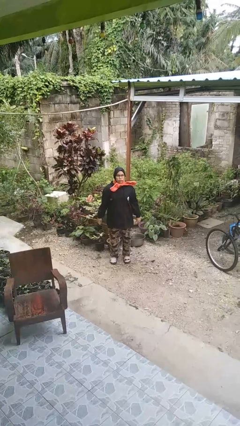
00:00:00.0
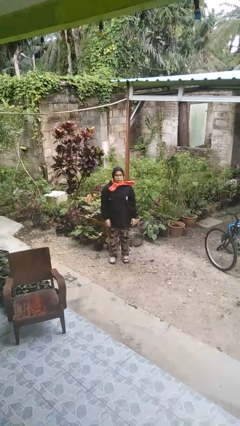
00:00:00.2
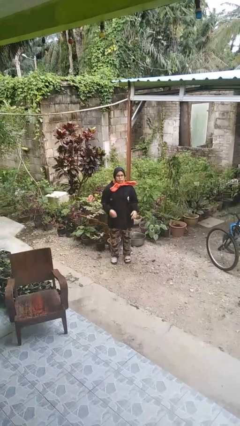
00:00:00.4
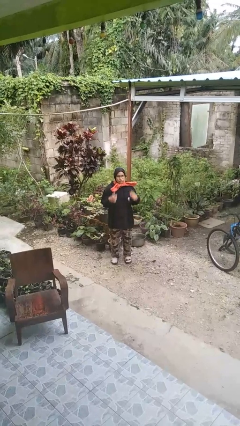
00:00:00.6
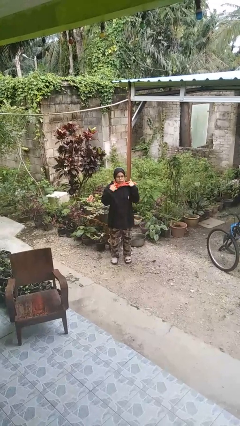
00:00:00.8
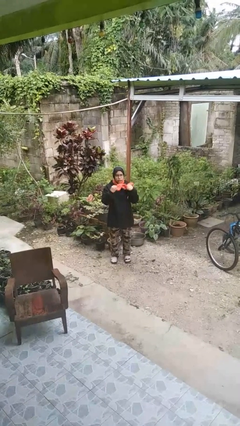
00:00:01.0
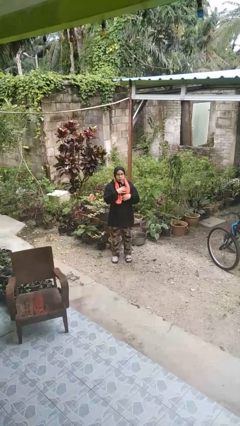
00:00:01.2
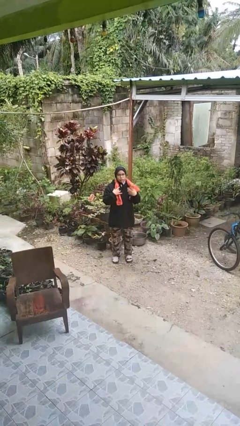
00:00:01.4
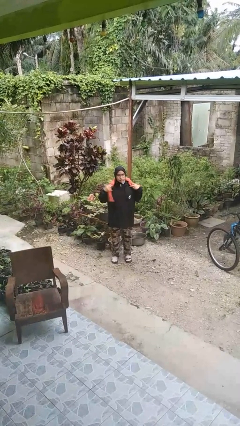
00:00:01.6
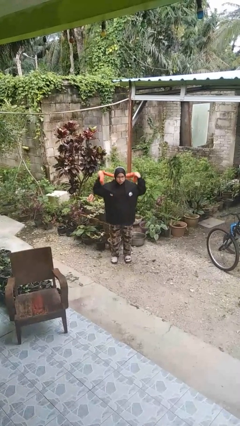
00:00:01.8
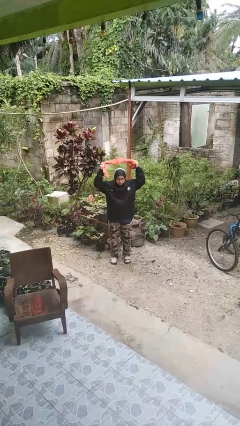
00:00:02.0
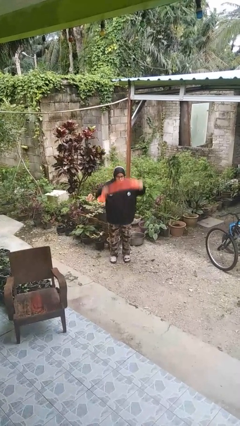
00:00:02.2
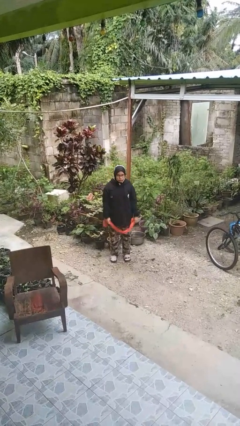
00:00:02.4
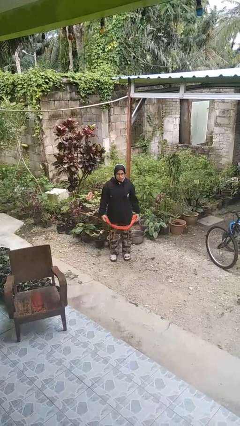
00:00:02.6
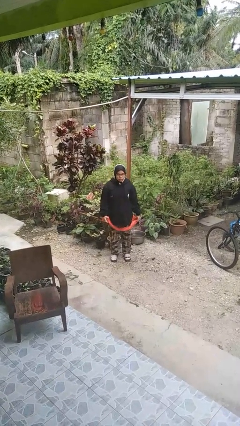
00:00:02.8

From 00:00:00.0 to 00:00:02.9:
person takes off scarf

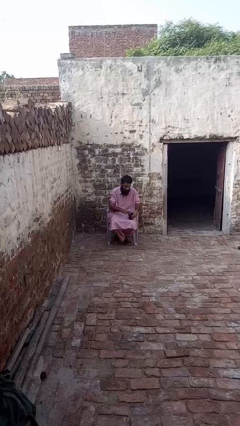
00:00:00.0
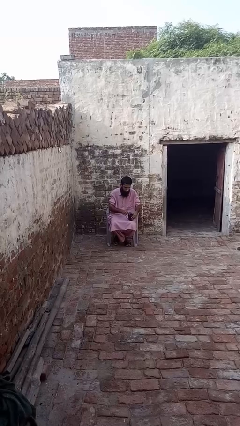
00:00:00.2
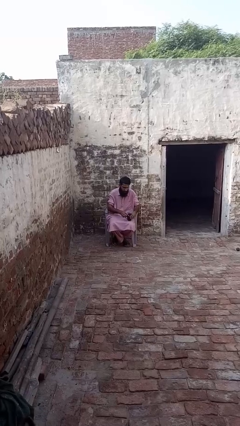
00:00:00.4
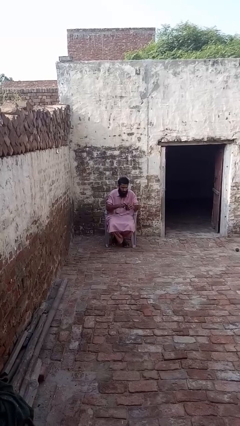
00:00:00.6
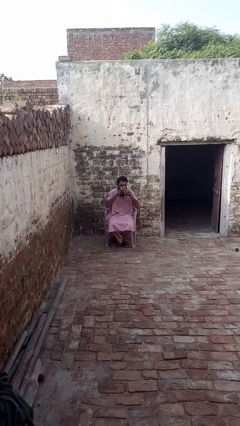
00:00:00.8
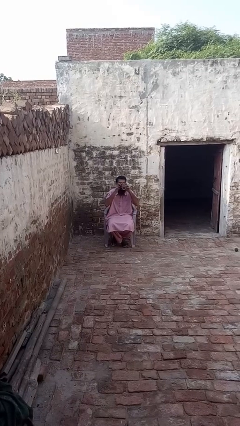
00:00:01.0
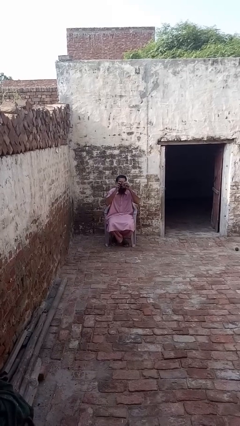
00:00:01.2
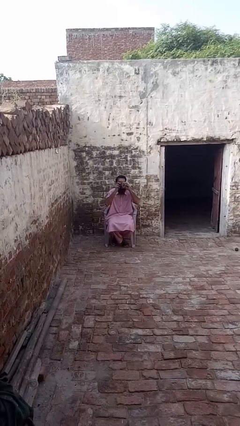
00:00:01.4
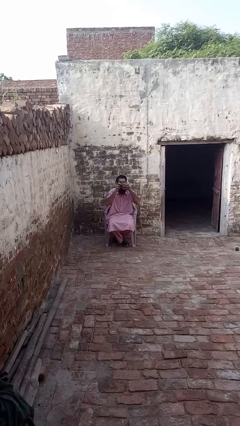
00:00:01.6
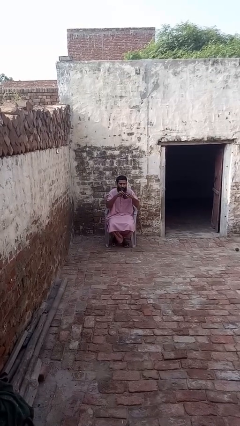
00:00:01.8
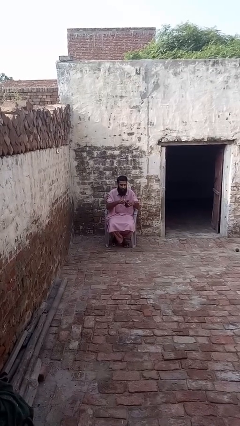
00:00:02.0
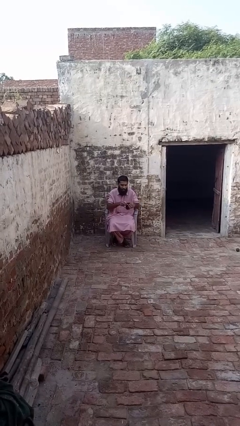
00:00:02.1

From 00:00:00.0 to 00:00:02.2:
person drinks from mug

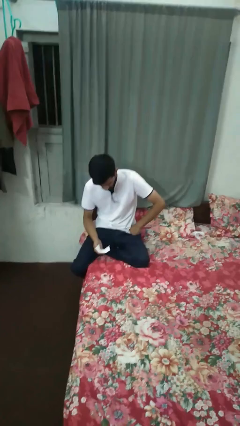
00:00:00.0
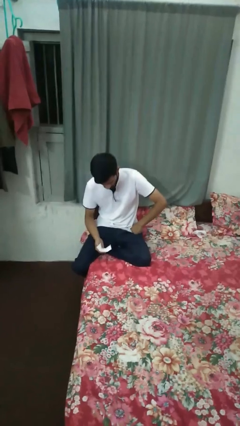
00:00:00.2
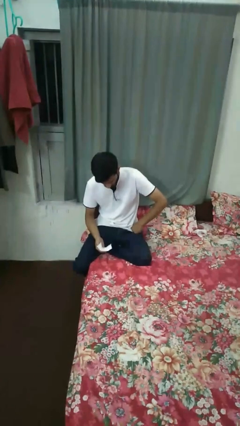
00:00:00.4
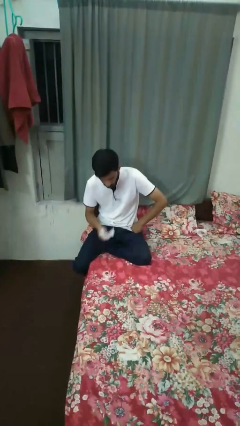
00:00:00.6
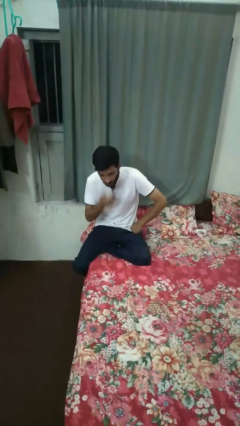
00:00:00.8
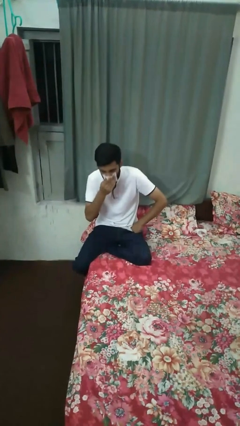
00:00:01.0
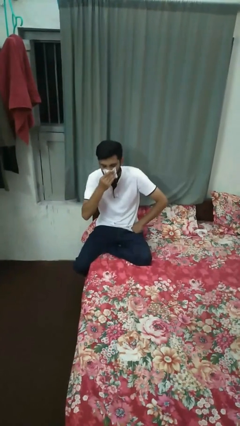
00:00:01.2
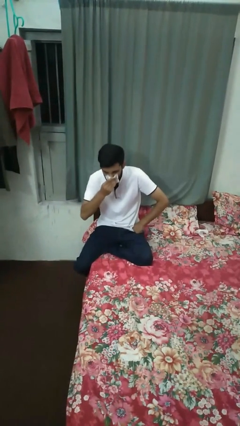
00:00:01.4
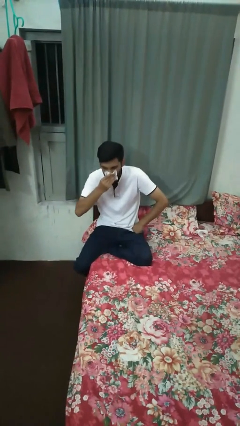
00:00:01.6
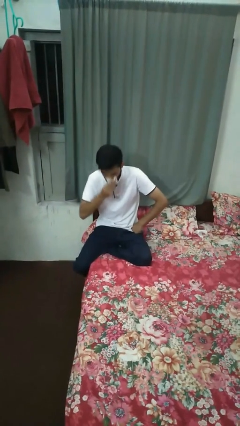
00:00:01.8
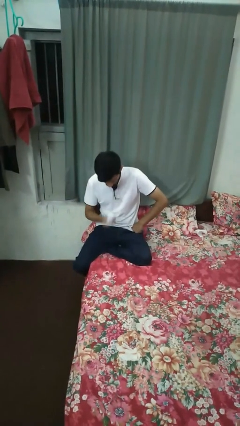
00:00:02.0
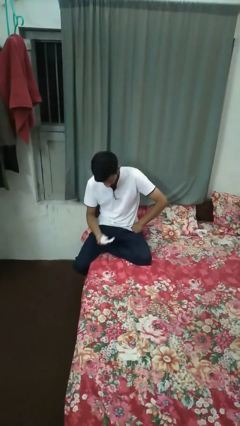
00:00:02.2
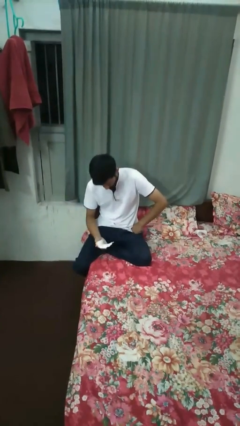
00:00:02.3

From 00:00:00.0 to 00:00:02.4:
person blows nose

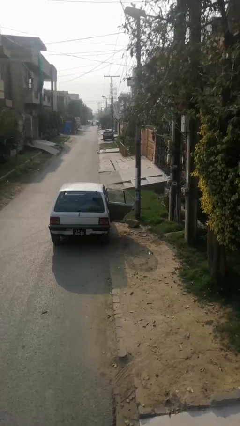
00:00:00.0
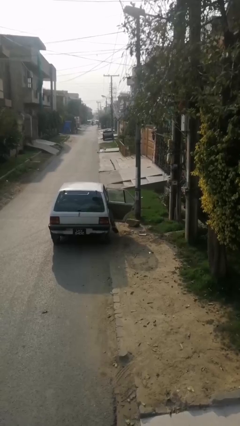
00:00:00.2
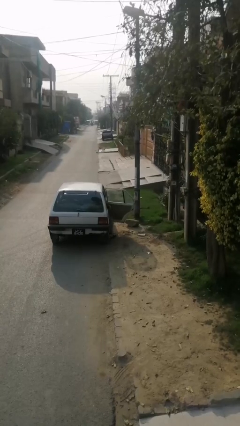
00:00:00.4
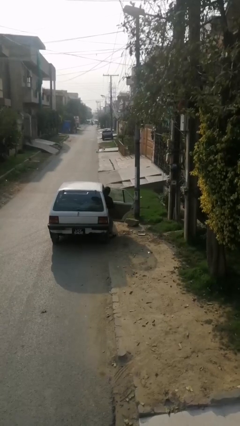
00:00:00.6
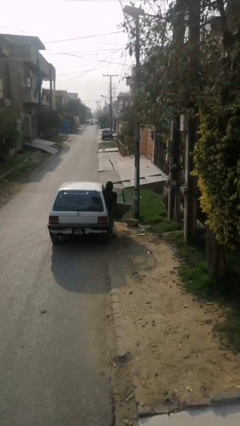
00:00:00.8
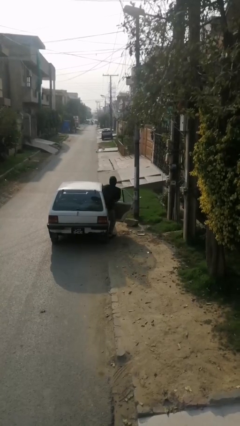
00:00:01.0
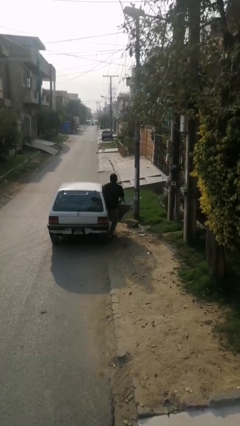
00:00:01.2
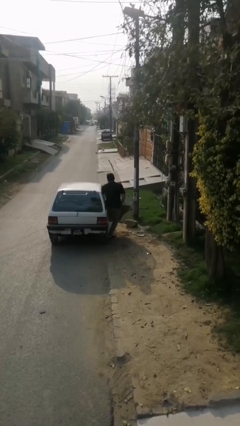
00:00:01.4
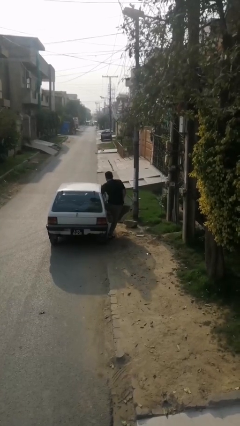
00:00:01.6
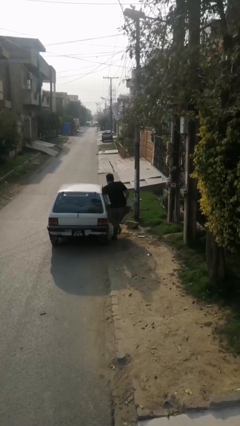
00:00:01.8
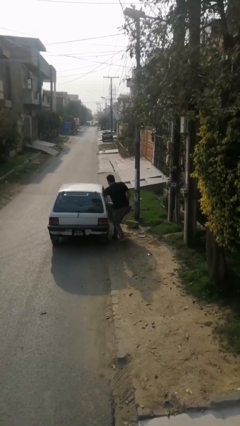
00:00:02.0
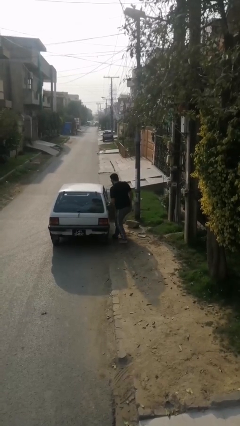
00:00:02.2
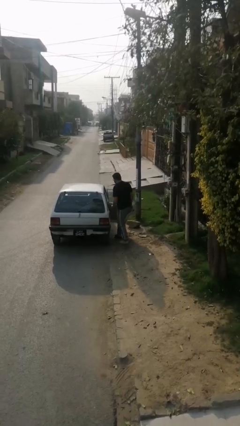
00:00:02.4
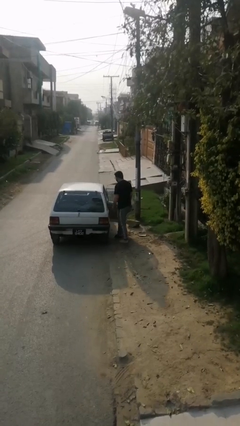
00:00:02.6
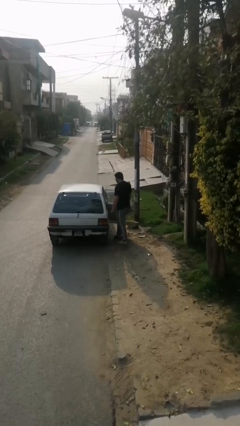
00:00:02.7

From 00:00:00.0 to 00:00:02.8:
person exits car

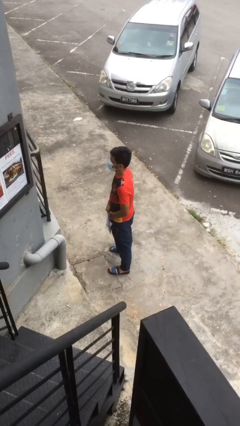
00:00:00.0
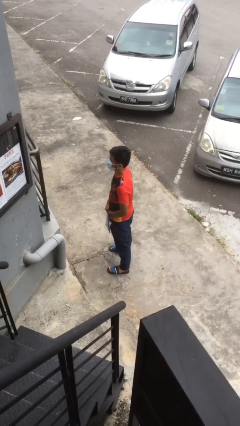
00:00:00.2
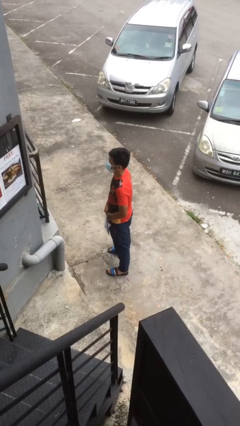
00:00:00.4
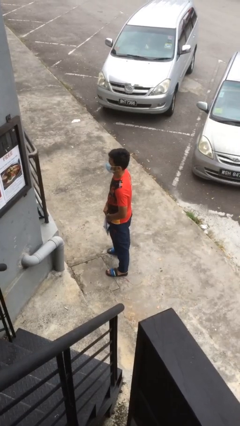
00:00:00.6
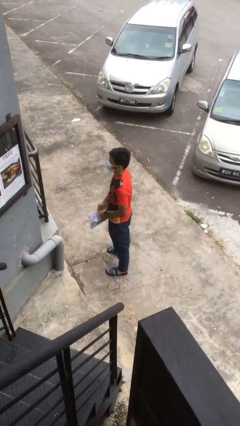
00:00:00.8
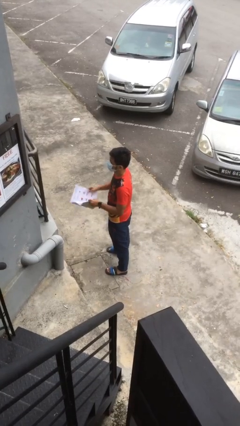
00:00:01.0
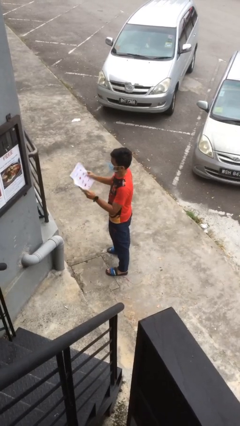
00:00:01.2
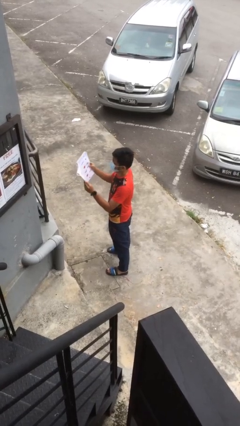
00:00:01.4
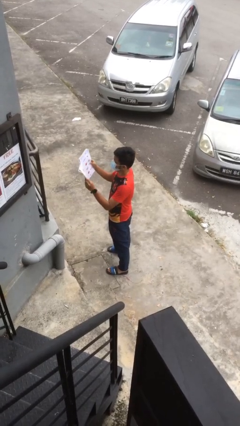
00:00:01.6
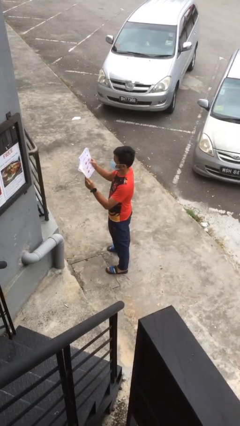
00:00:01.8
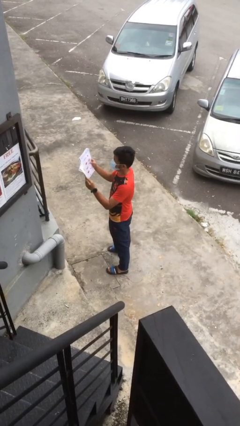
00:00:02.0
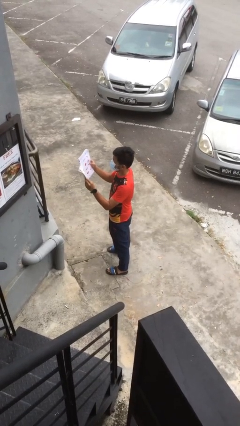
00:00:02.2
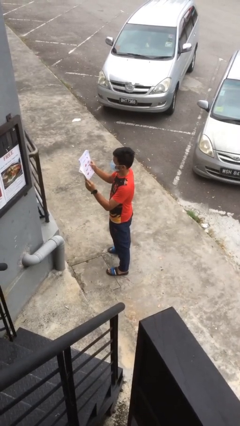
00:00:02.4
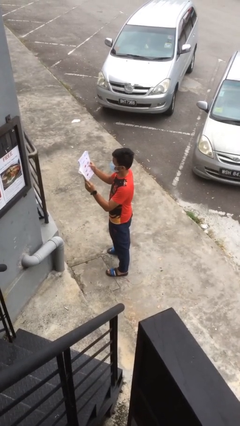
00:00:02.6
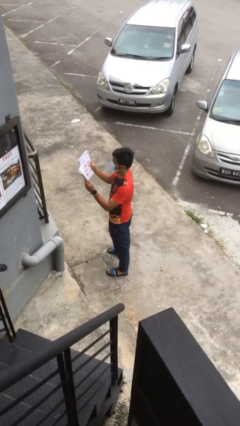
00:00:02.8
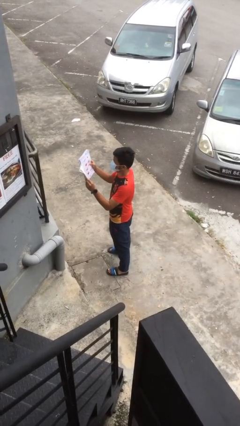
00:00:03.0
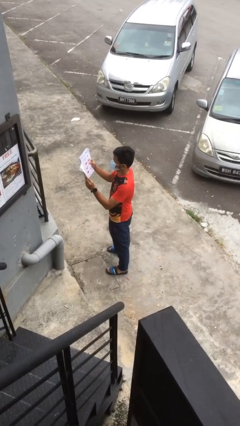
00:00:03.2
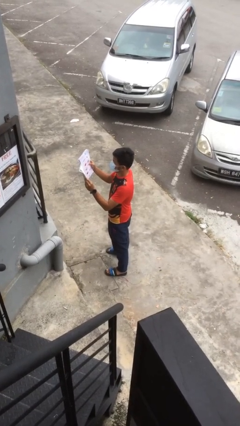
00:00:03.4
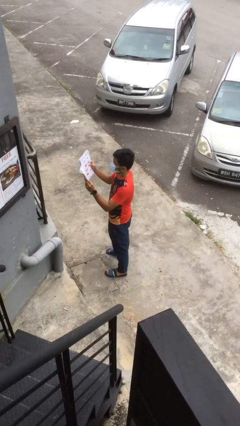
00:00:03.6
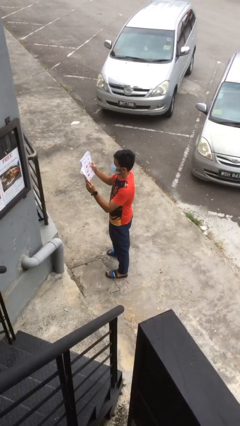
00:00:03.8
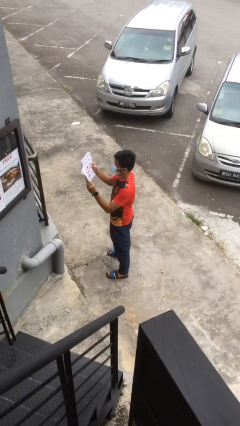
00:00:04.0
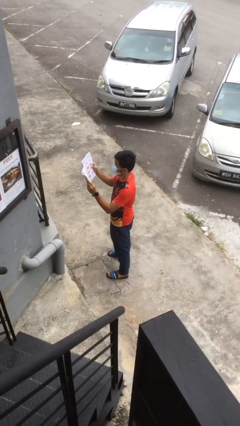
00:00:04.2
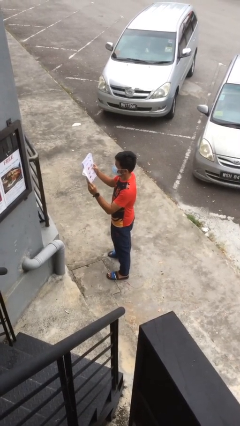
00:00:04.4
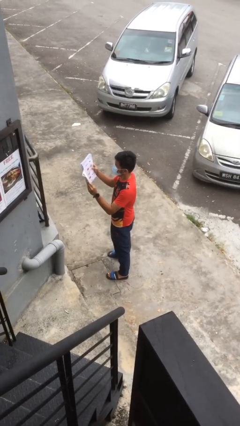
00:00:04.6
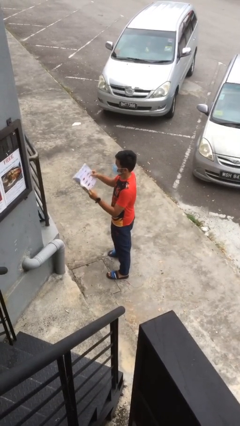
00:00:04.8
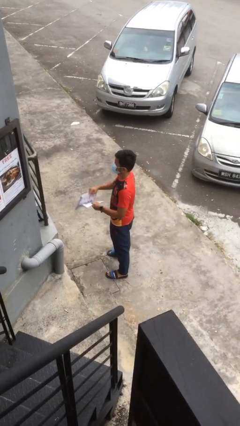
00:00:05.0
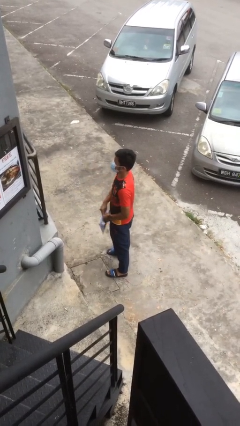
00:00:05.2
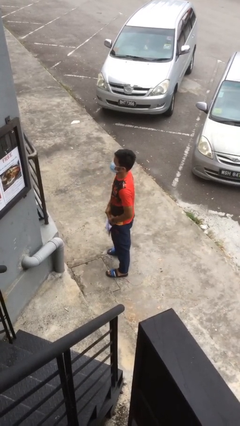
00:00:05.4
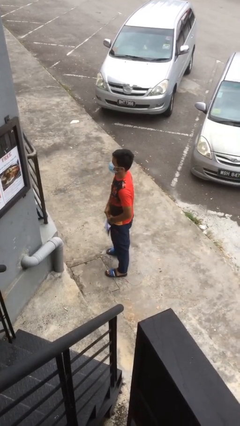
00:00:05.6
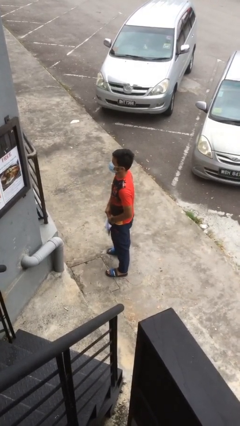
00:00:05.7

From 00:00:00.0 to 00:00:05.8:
person reads document

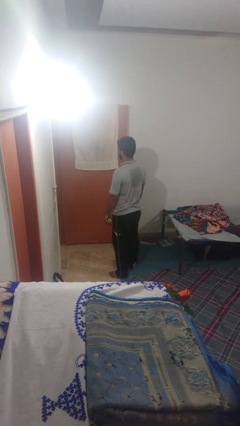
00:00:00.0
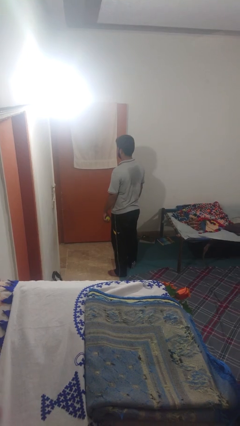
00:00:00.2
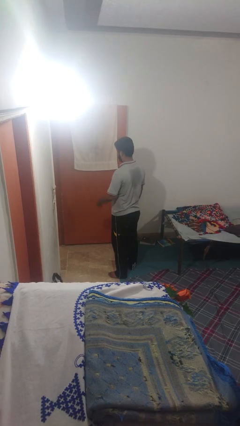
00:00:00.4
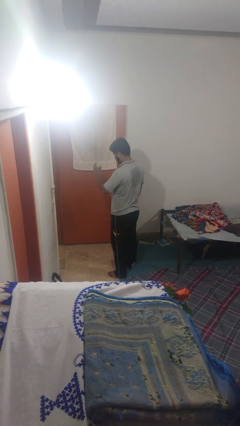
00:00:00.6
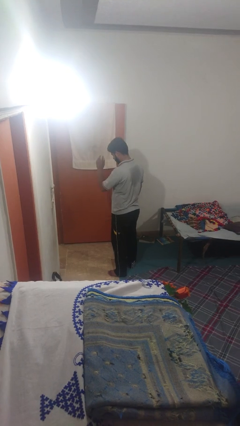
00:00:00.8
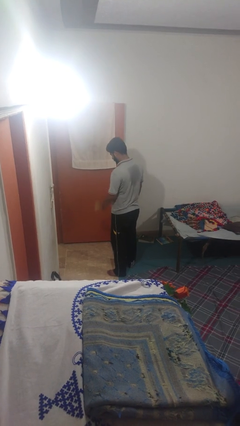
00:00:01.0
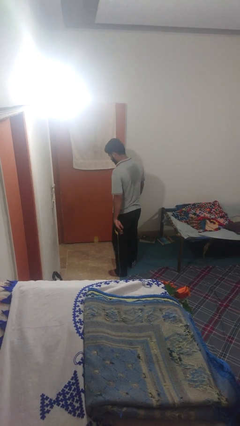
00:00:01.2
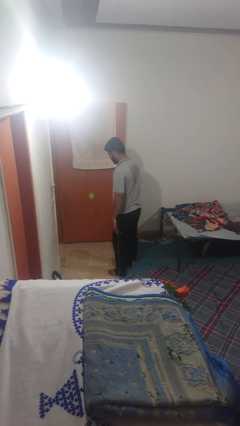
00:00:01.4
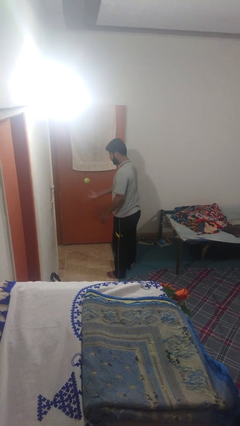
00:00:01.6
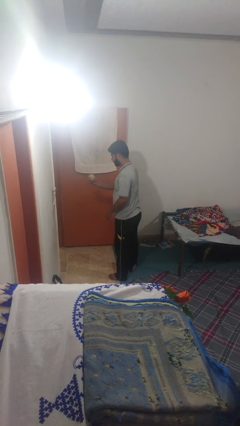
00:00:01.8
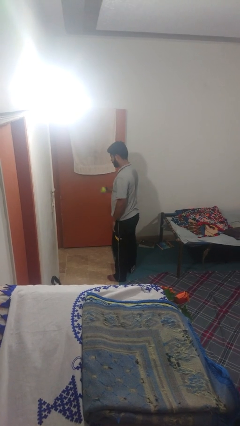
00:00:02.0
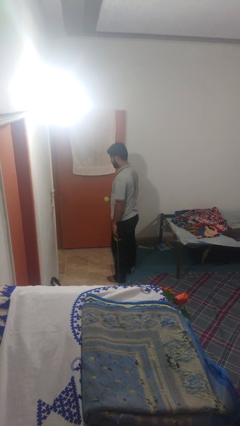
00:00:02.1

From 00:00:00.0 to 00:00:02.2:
person bounces ball on floor
